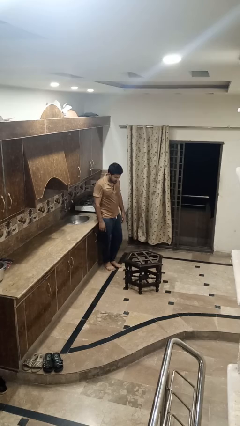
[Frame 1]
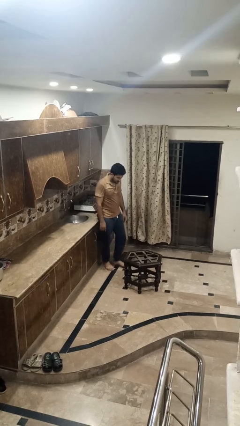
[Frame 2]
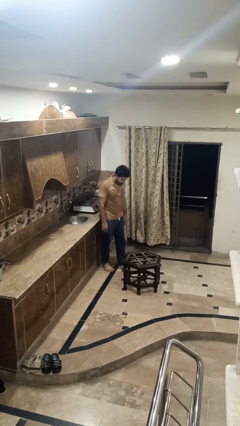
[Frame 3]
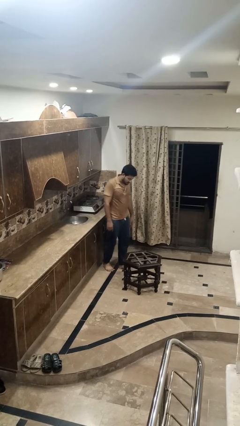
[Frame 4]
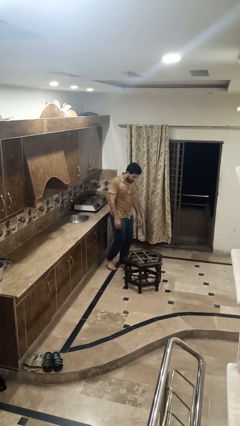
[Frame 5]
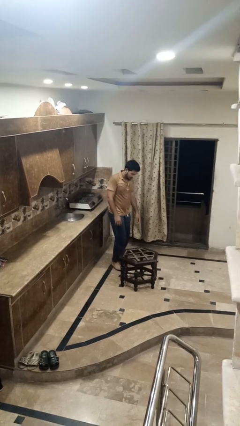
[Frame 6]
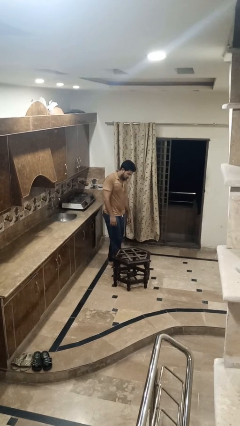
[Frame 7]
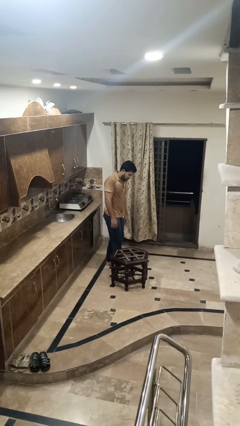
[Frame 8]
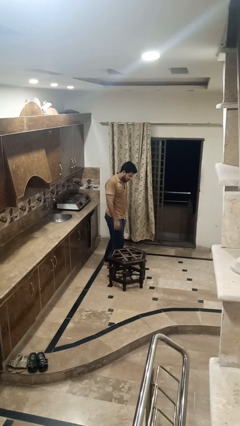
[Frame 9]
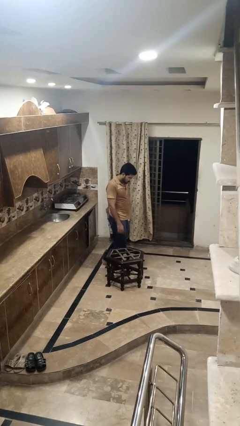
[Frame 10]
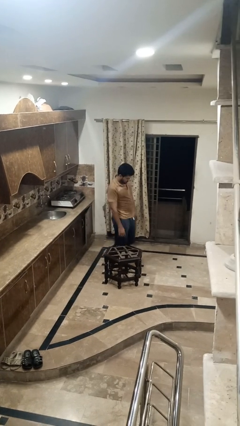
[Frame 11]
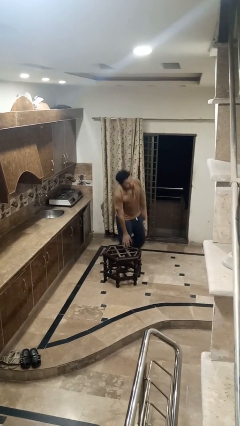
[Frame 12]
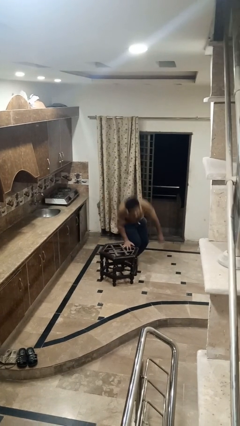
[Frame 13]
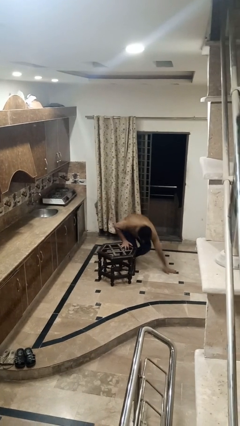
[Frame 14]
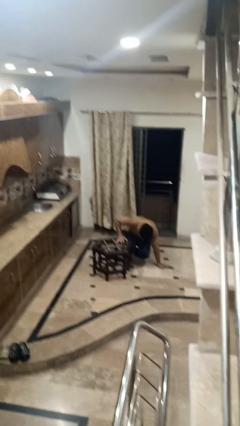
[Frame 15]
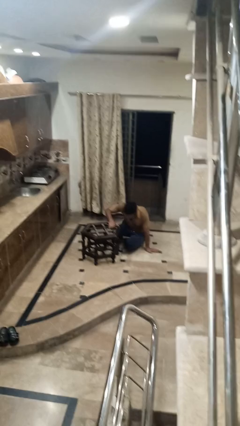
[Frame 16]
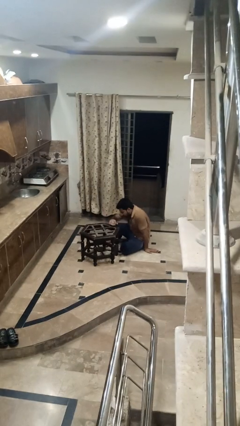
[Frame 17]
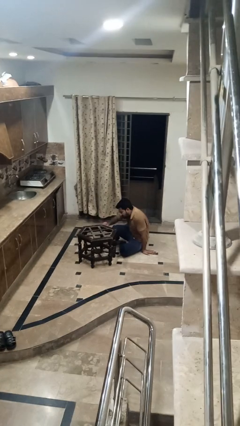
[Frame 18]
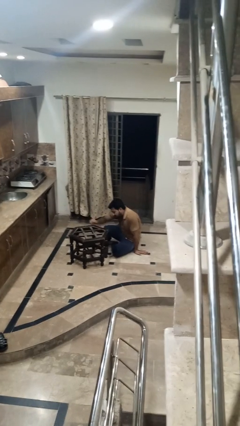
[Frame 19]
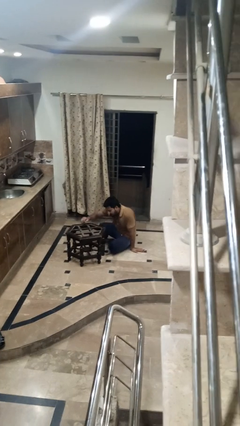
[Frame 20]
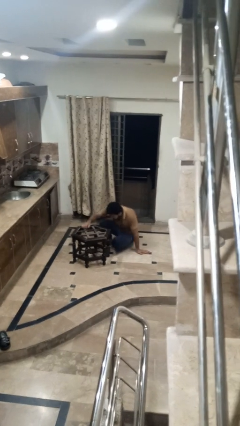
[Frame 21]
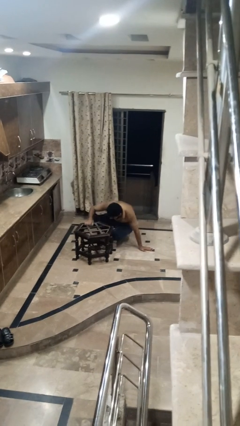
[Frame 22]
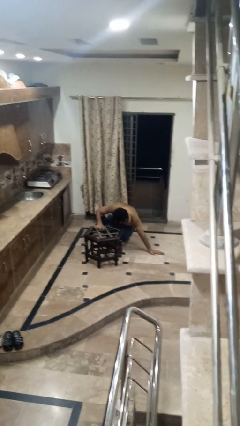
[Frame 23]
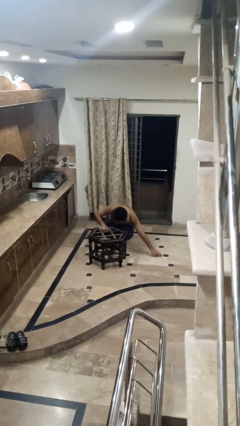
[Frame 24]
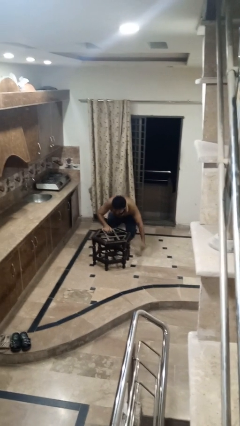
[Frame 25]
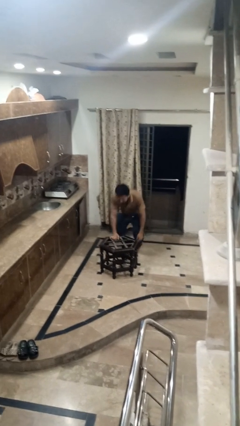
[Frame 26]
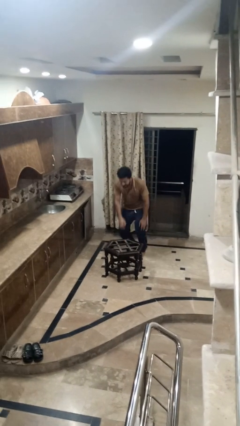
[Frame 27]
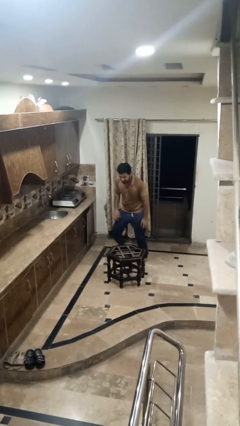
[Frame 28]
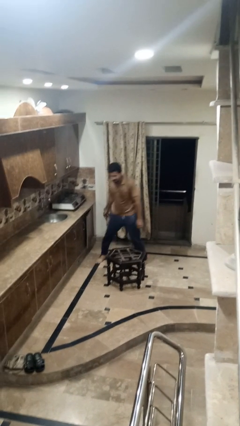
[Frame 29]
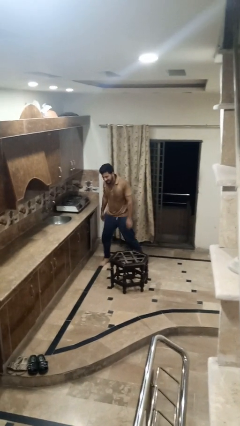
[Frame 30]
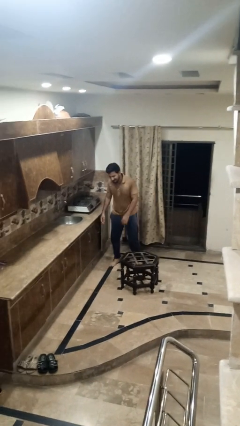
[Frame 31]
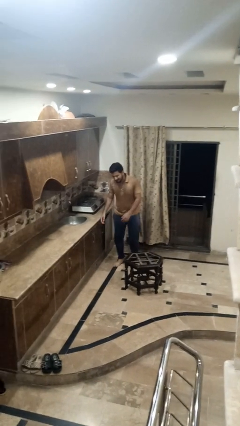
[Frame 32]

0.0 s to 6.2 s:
person bumps into table

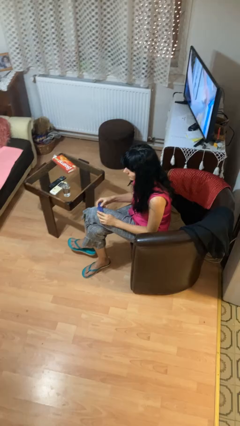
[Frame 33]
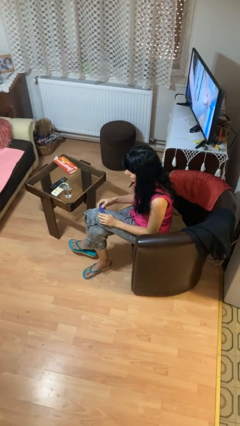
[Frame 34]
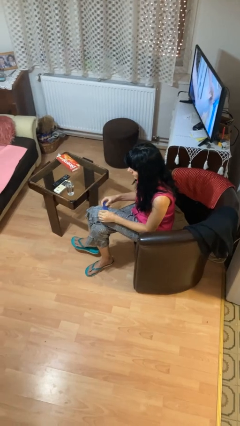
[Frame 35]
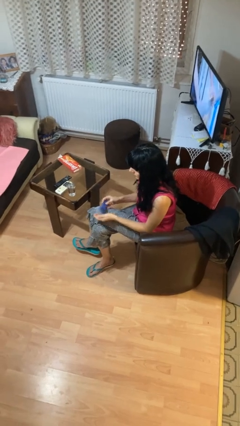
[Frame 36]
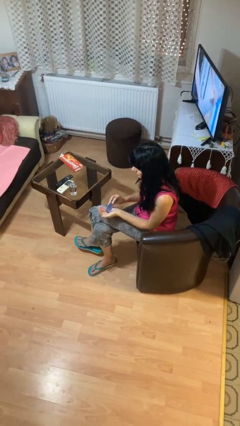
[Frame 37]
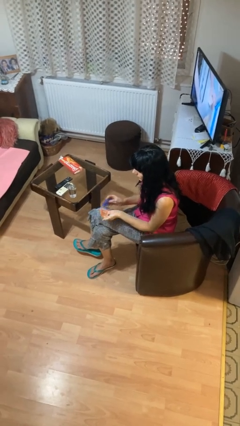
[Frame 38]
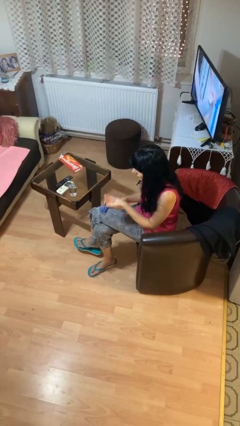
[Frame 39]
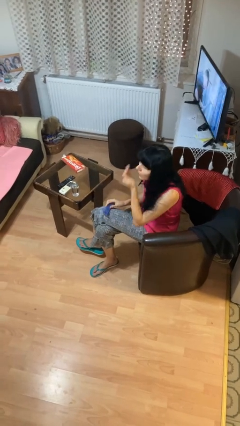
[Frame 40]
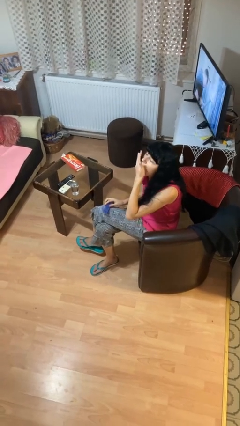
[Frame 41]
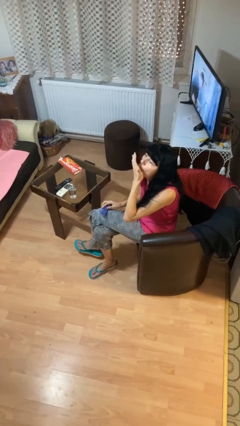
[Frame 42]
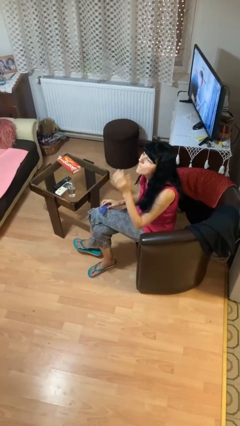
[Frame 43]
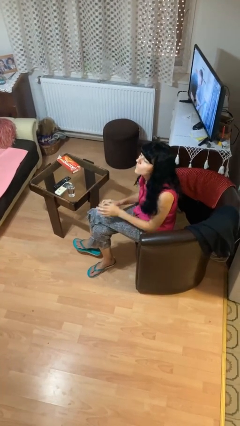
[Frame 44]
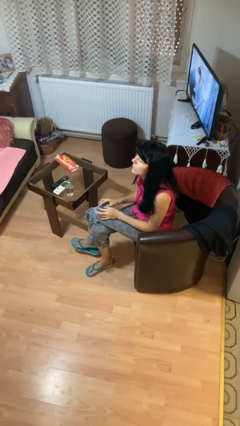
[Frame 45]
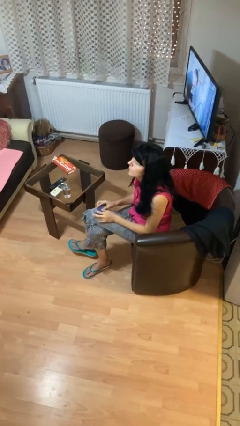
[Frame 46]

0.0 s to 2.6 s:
person takes medicine pills

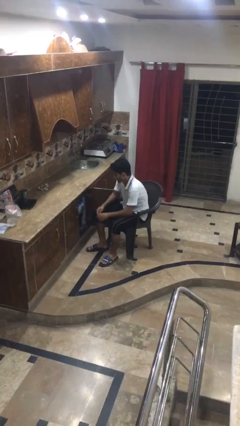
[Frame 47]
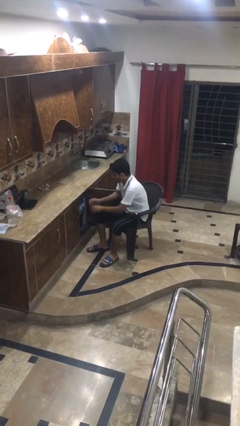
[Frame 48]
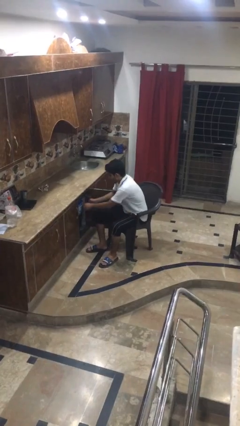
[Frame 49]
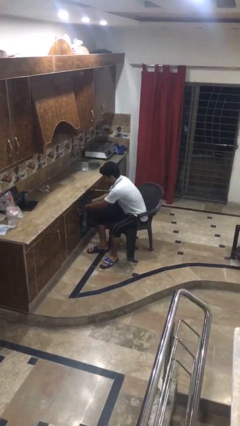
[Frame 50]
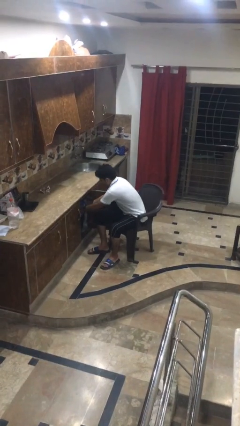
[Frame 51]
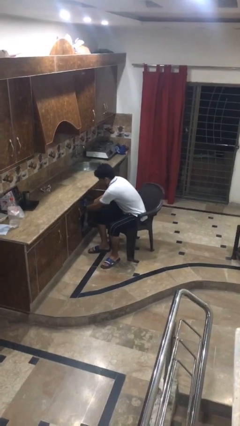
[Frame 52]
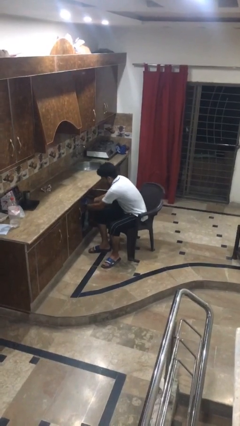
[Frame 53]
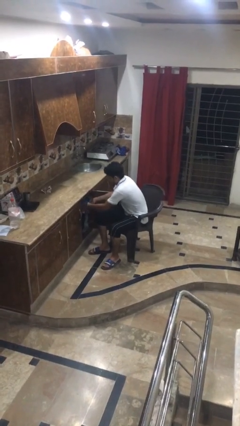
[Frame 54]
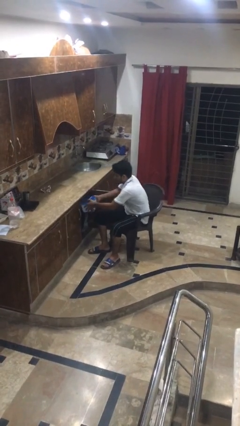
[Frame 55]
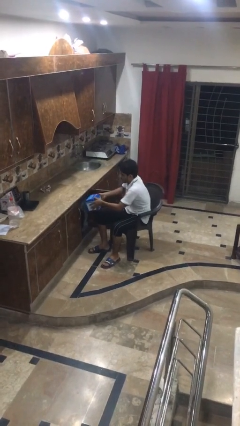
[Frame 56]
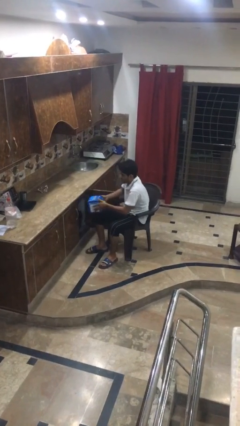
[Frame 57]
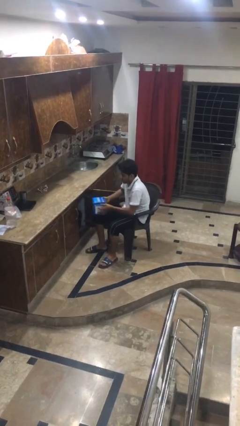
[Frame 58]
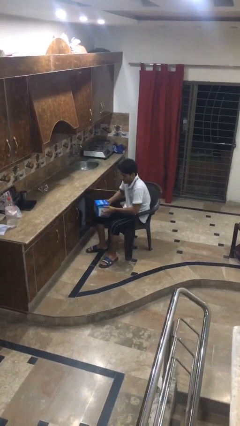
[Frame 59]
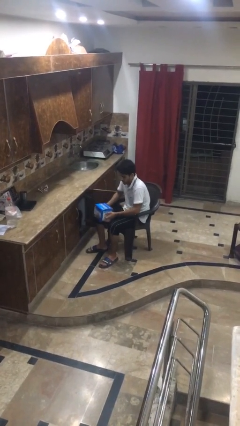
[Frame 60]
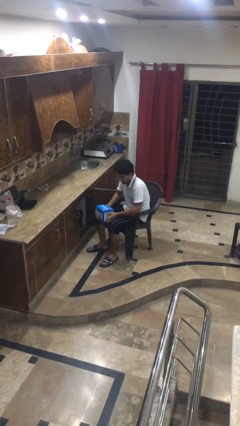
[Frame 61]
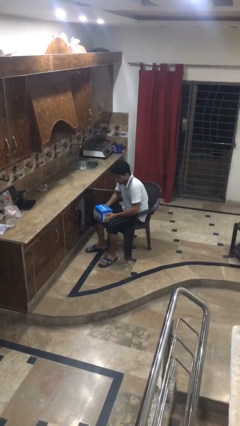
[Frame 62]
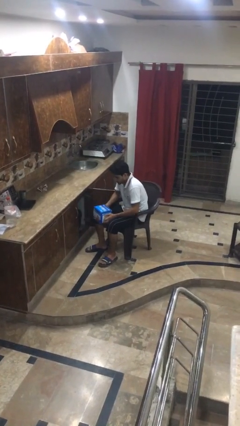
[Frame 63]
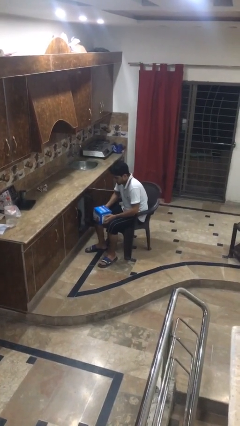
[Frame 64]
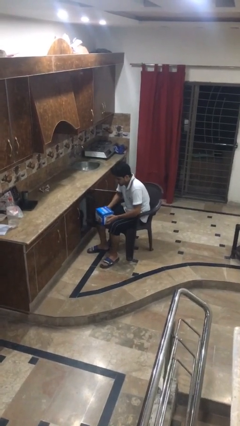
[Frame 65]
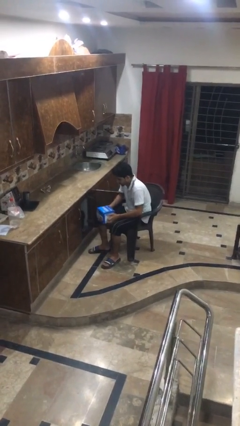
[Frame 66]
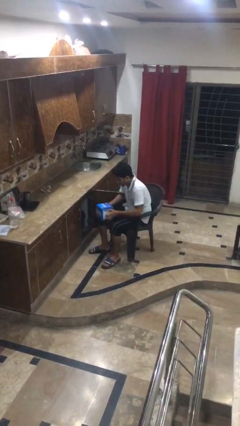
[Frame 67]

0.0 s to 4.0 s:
person picks up object from cabinet

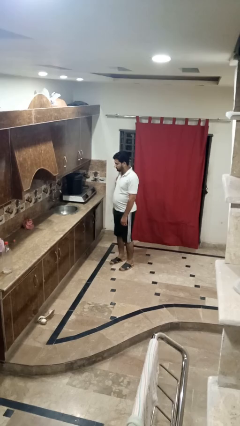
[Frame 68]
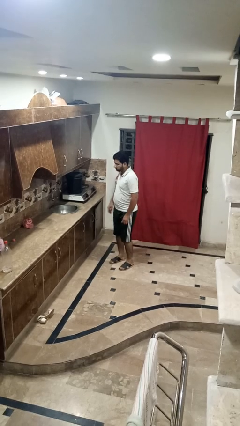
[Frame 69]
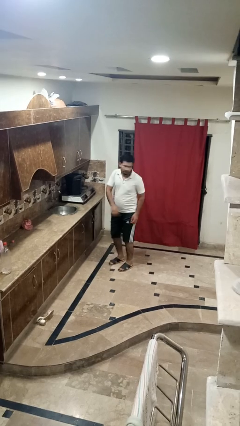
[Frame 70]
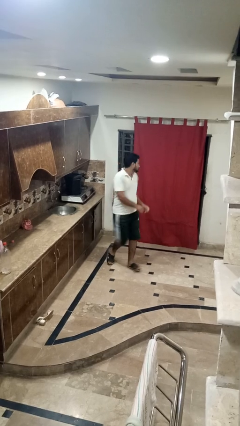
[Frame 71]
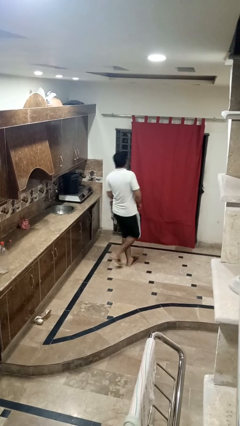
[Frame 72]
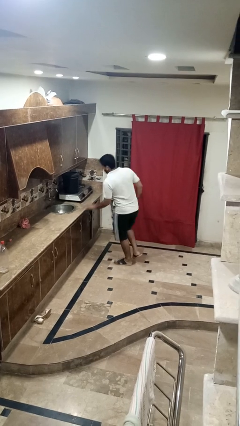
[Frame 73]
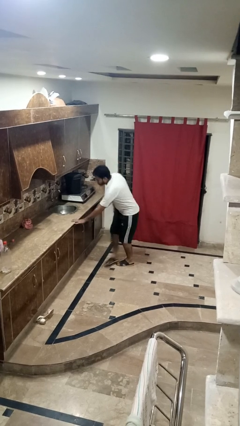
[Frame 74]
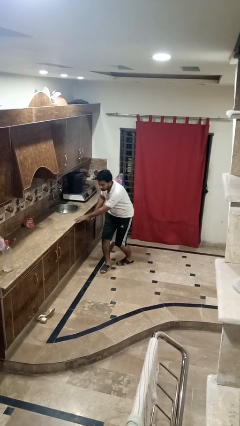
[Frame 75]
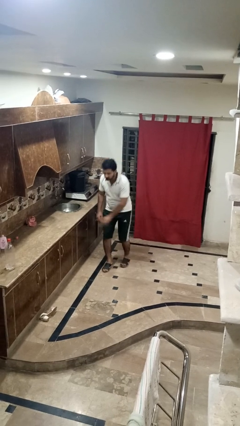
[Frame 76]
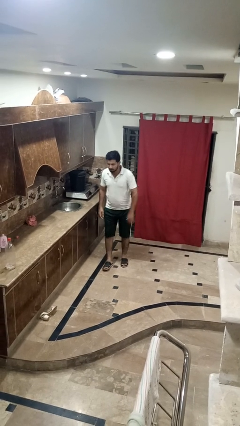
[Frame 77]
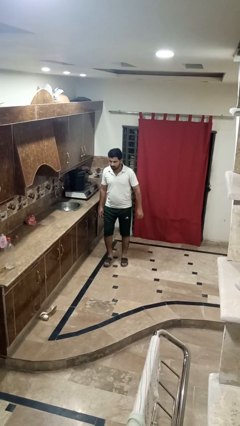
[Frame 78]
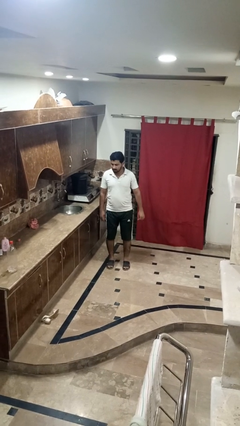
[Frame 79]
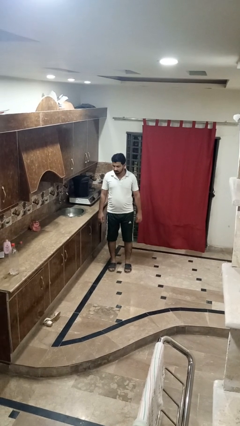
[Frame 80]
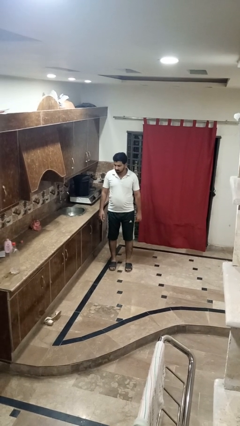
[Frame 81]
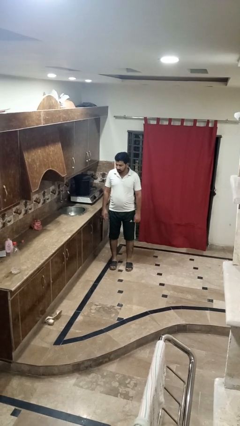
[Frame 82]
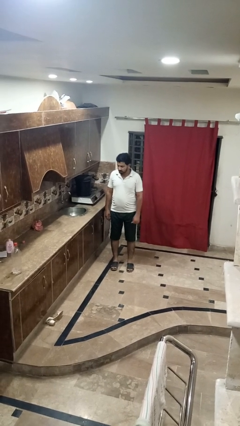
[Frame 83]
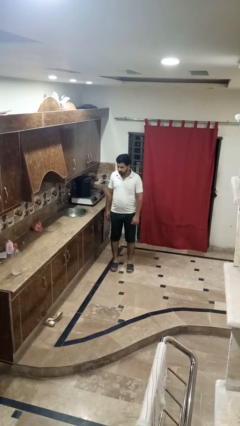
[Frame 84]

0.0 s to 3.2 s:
person twirls

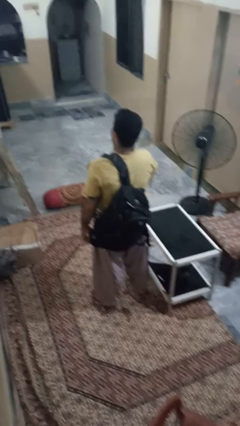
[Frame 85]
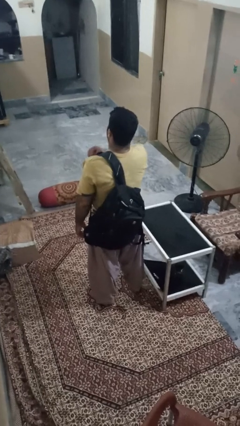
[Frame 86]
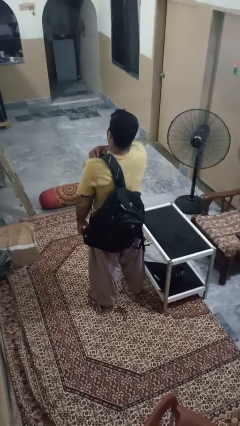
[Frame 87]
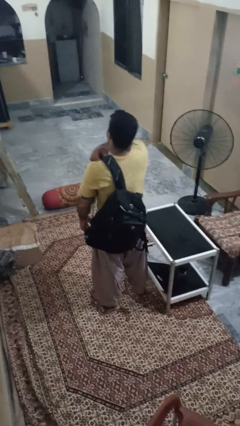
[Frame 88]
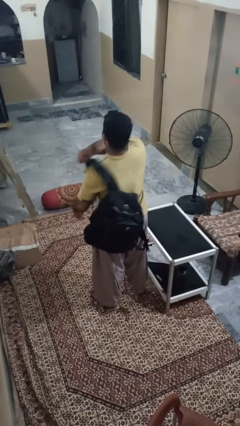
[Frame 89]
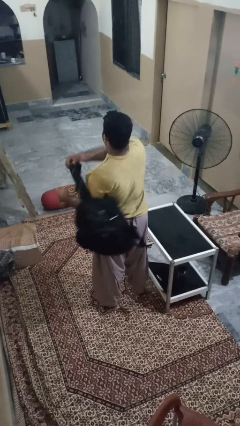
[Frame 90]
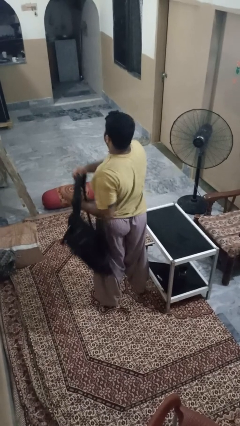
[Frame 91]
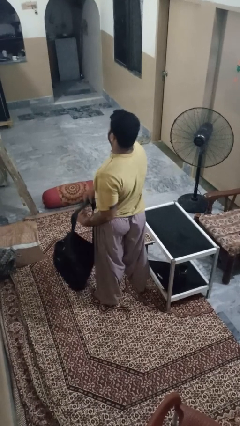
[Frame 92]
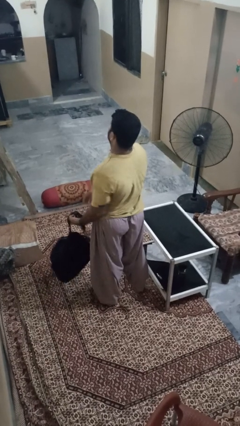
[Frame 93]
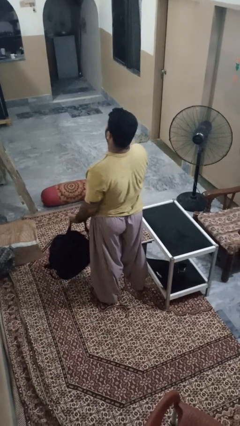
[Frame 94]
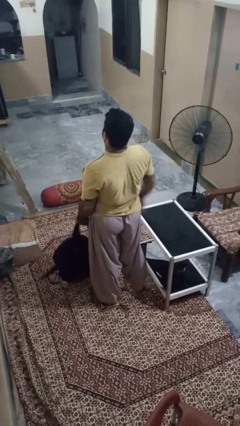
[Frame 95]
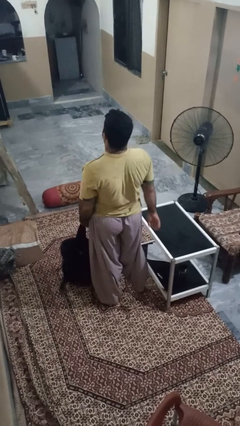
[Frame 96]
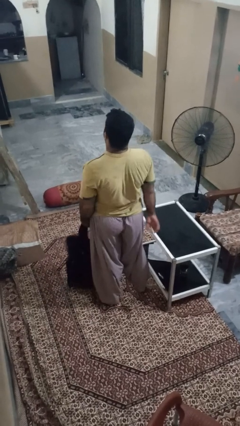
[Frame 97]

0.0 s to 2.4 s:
person takes off backpack
